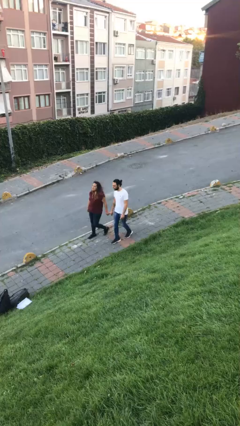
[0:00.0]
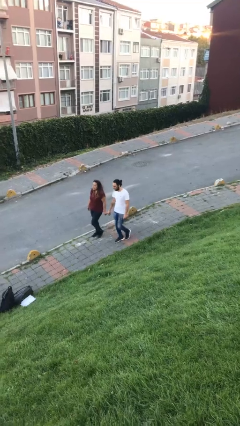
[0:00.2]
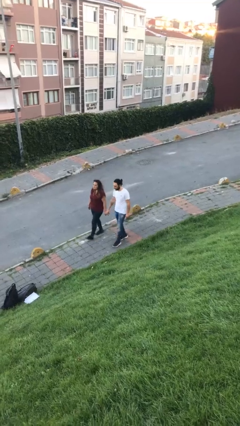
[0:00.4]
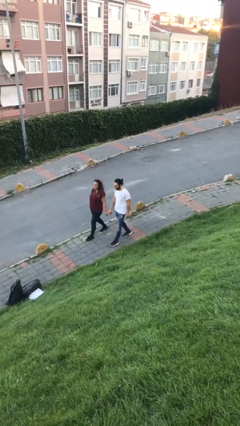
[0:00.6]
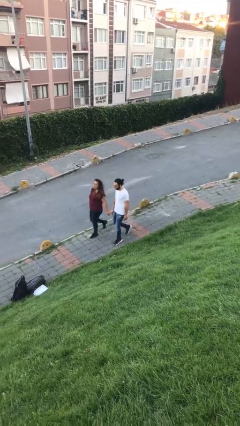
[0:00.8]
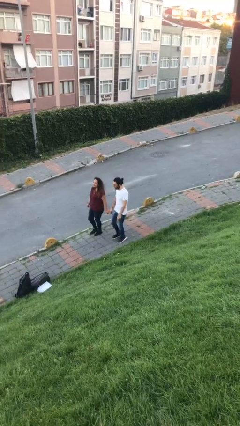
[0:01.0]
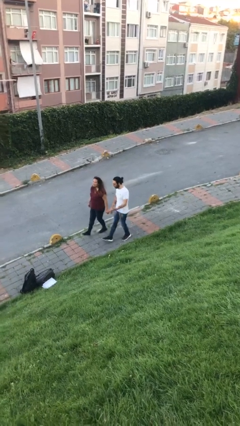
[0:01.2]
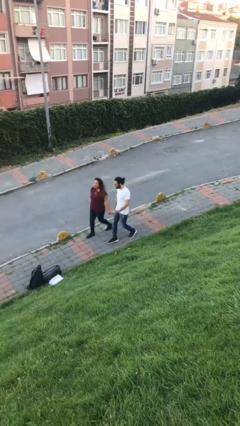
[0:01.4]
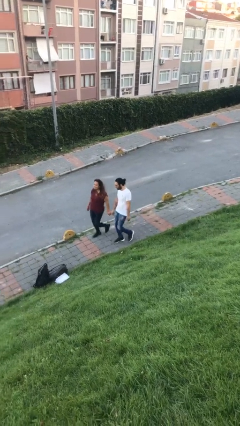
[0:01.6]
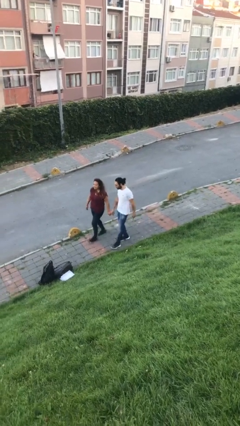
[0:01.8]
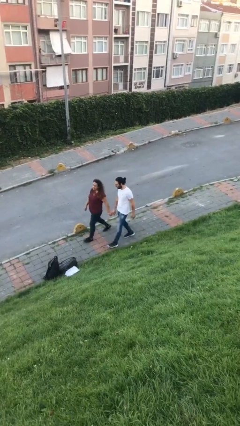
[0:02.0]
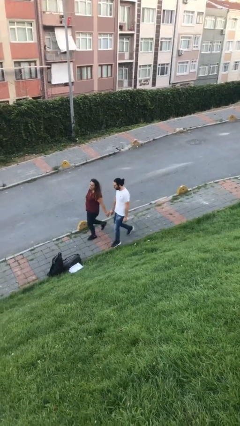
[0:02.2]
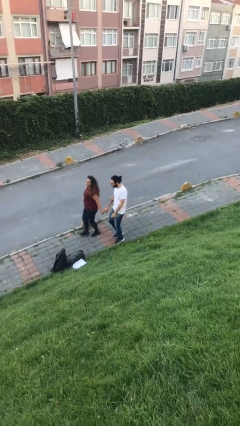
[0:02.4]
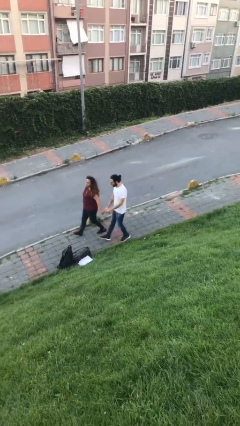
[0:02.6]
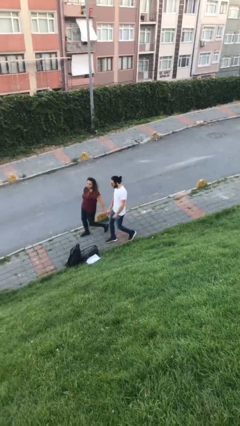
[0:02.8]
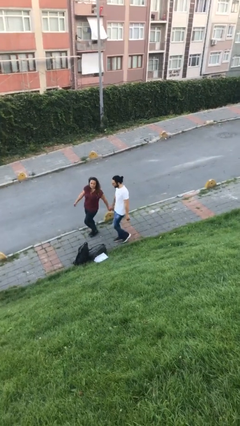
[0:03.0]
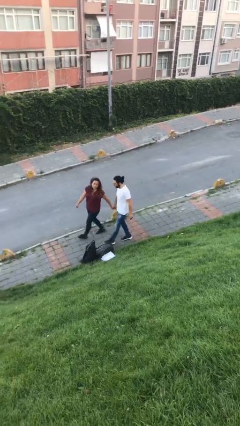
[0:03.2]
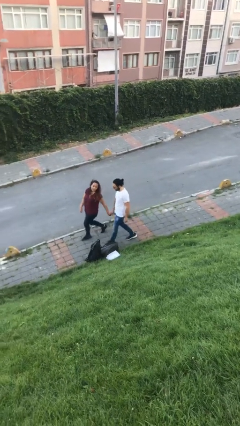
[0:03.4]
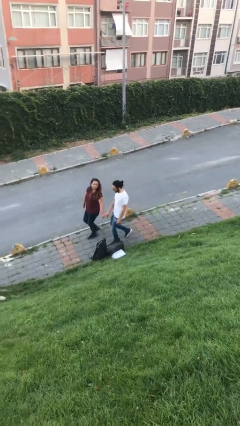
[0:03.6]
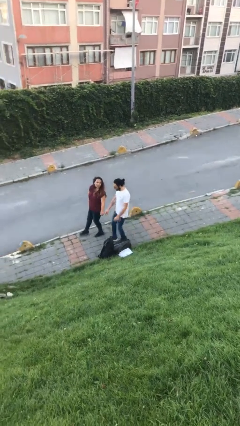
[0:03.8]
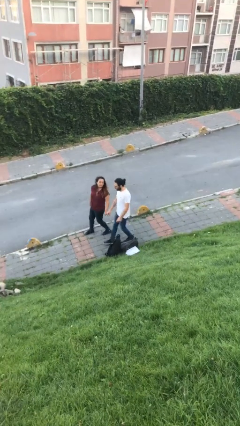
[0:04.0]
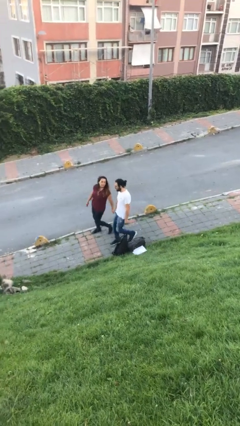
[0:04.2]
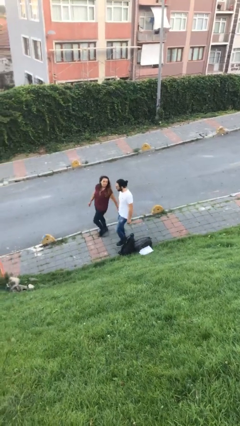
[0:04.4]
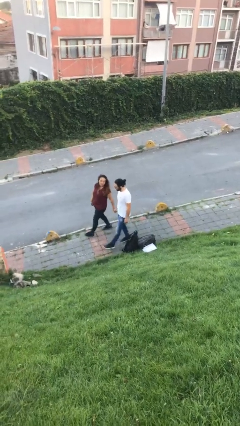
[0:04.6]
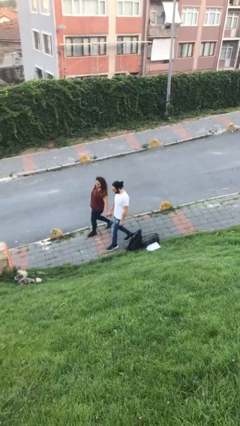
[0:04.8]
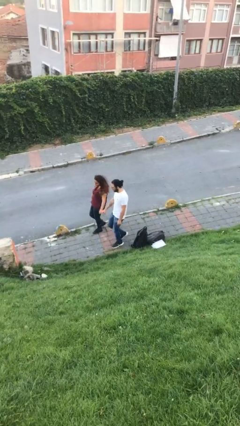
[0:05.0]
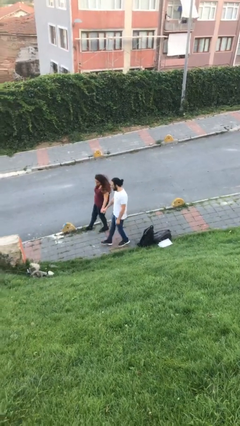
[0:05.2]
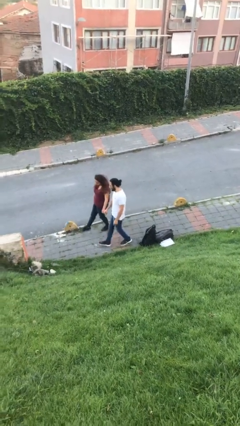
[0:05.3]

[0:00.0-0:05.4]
person holds hand

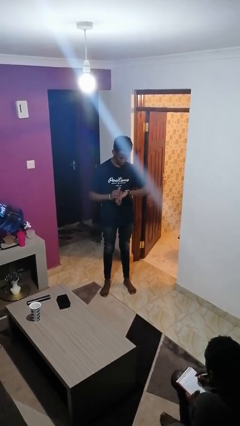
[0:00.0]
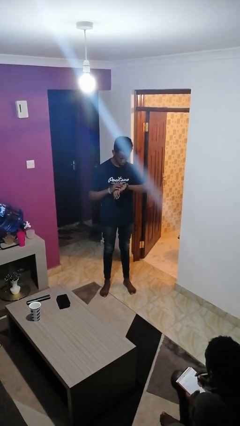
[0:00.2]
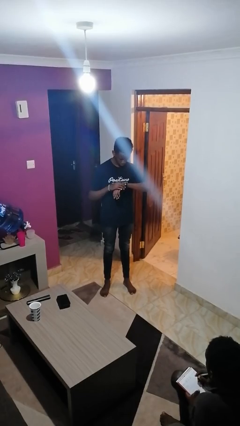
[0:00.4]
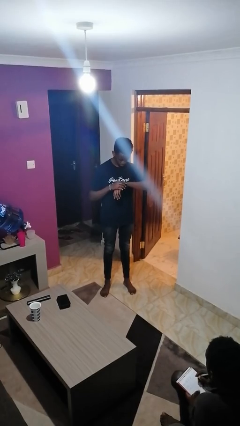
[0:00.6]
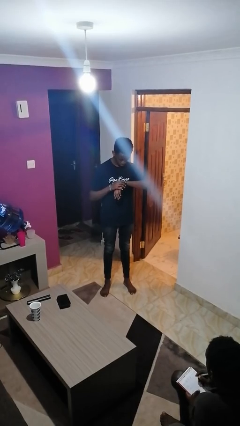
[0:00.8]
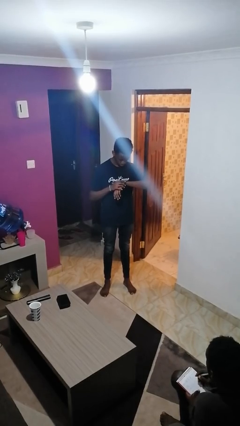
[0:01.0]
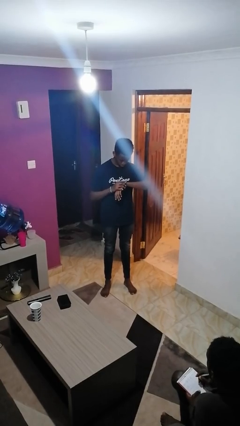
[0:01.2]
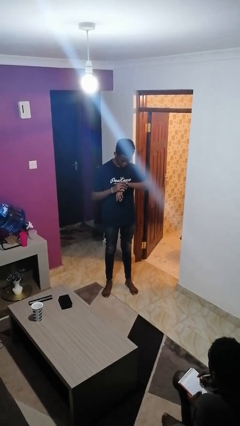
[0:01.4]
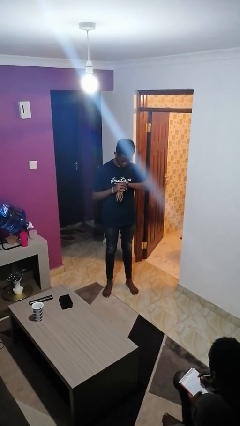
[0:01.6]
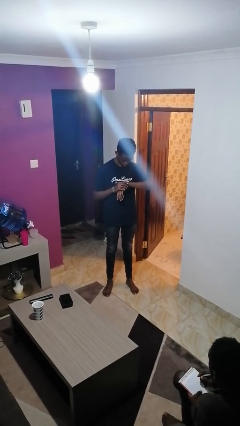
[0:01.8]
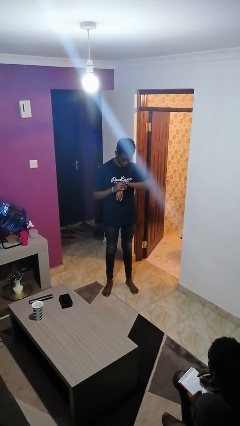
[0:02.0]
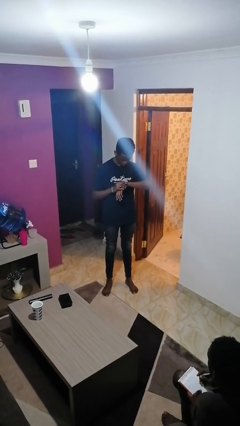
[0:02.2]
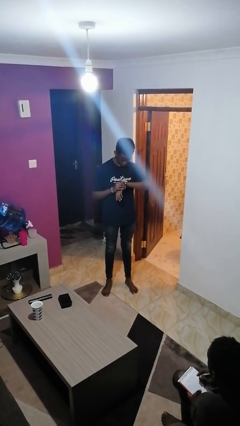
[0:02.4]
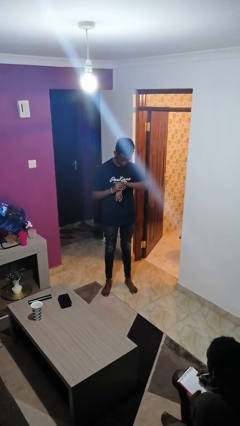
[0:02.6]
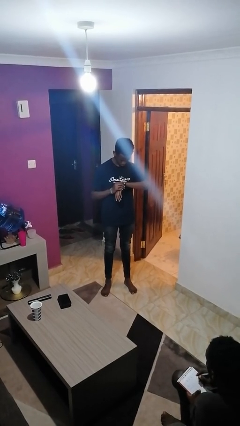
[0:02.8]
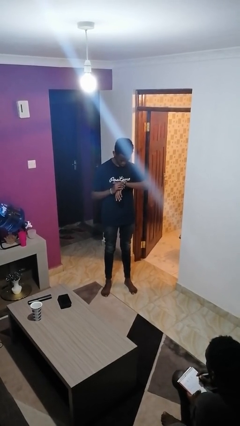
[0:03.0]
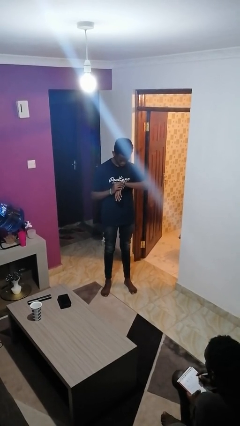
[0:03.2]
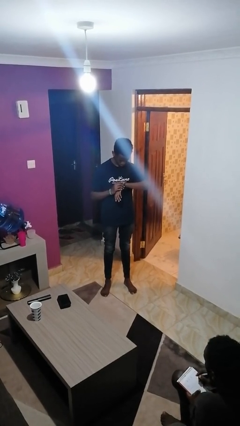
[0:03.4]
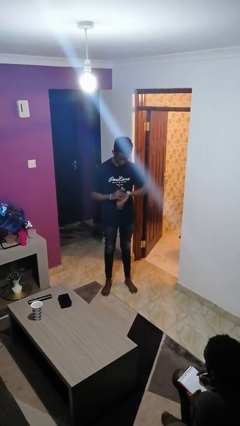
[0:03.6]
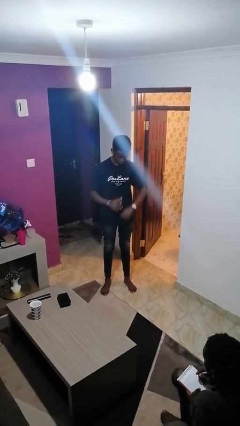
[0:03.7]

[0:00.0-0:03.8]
person looks at wristwatch

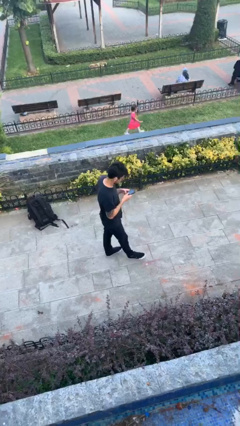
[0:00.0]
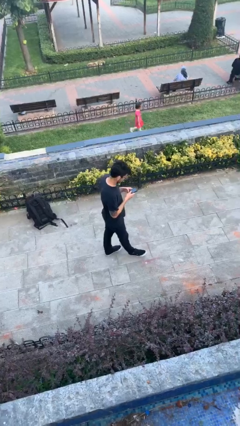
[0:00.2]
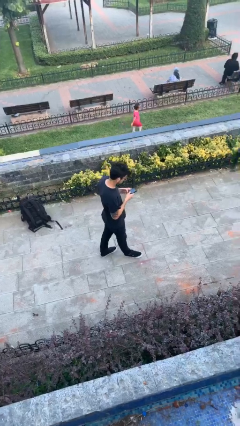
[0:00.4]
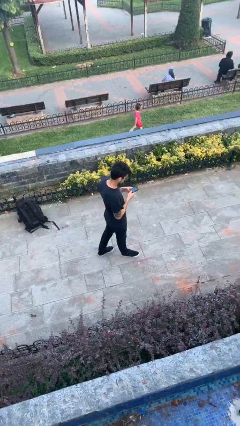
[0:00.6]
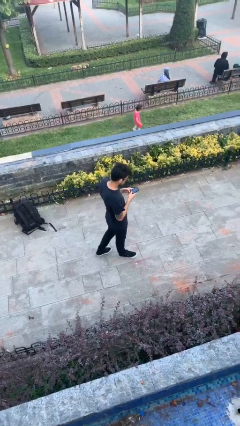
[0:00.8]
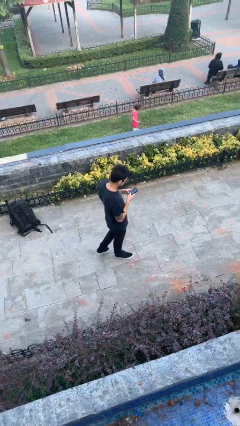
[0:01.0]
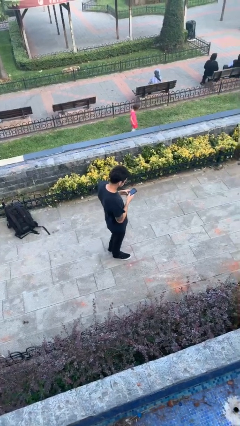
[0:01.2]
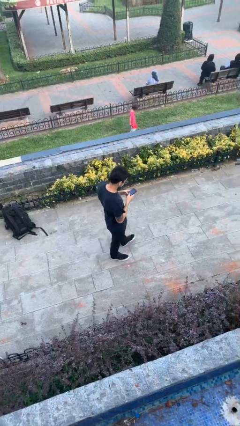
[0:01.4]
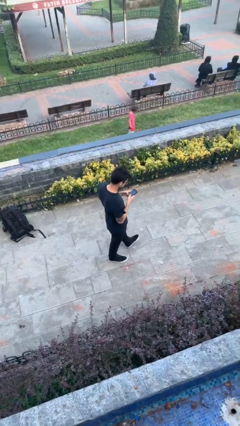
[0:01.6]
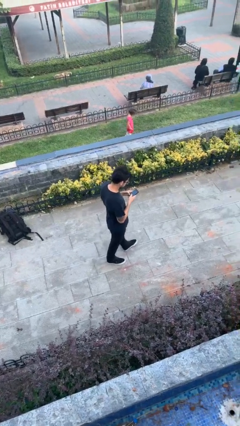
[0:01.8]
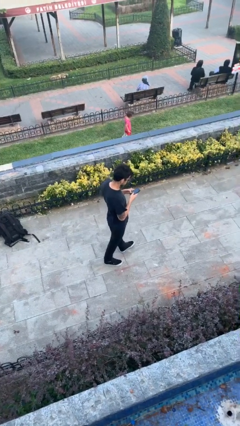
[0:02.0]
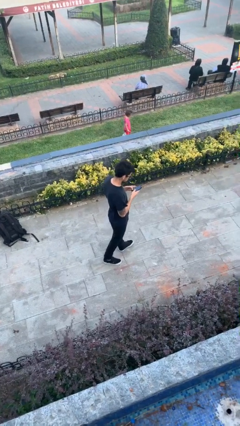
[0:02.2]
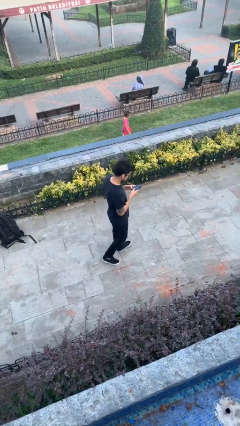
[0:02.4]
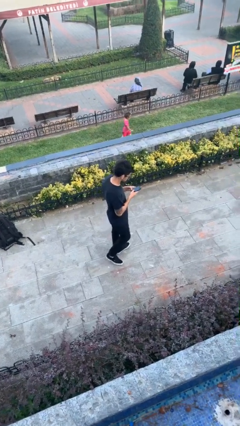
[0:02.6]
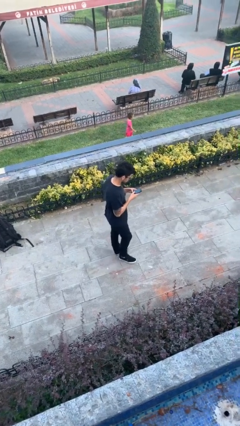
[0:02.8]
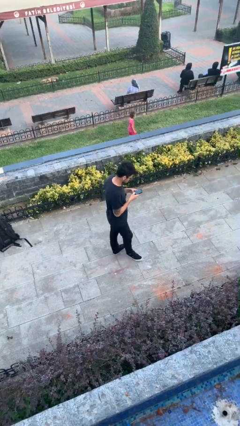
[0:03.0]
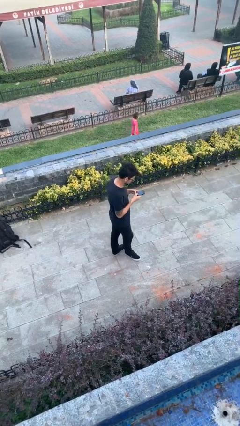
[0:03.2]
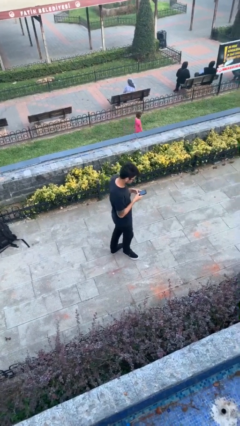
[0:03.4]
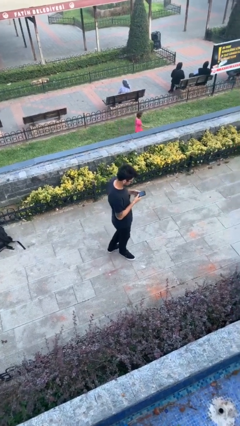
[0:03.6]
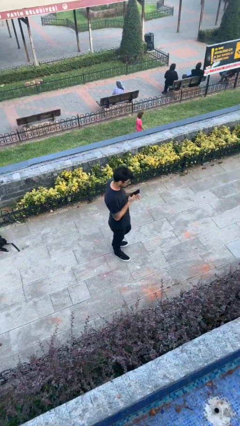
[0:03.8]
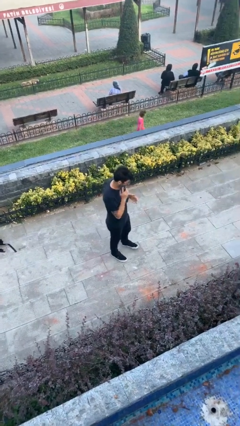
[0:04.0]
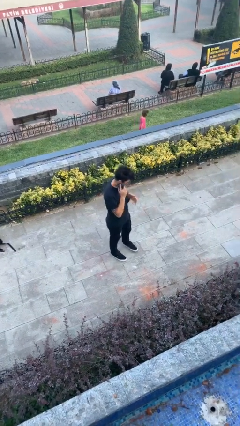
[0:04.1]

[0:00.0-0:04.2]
person texts on phone

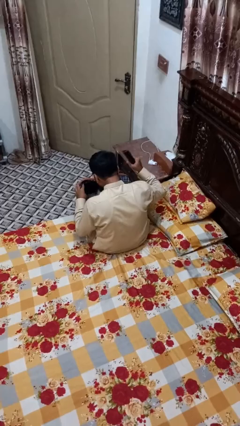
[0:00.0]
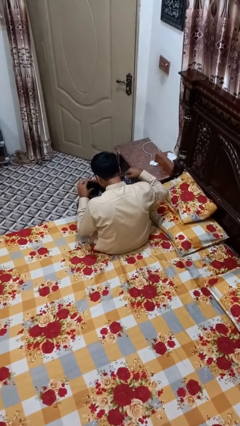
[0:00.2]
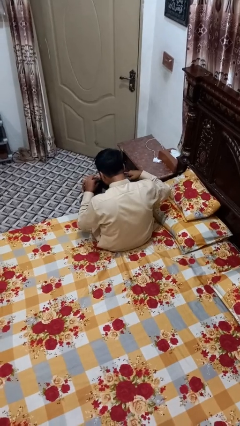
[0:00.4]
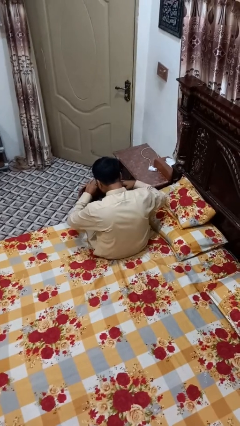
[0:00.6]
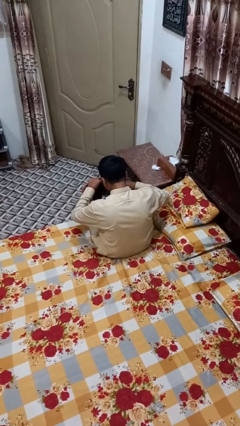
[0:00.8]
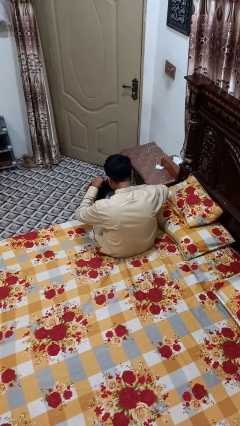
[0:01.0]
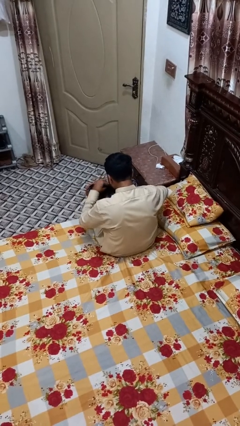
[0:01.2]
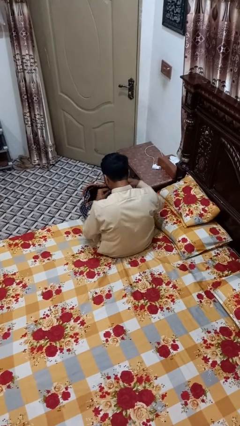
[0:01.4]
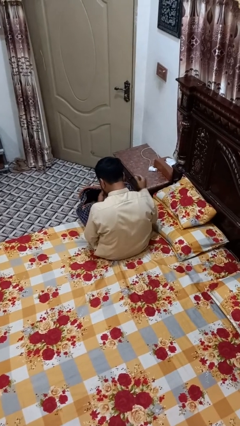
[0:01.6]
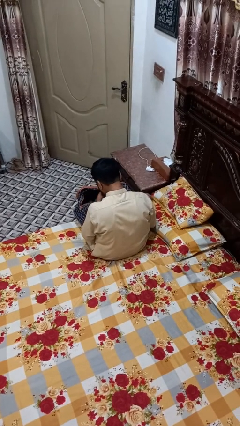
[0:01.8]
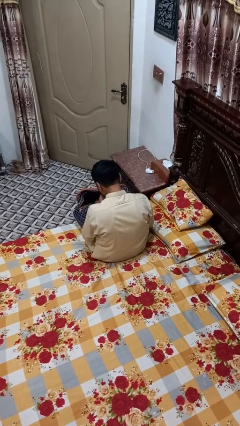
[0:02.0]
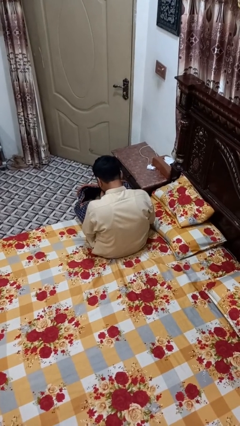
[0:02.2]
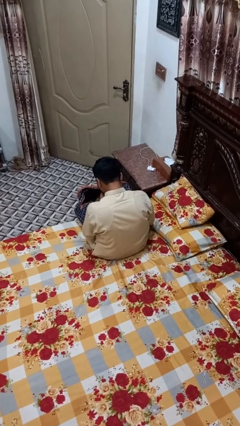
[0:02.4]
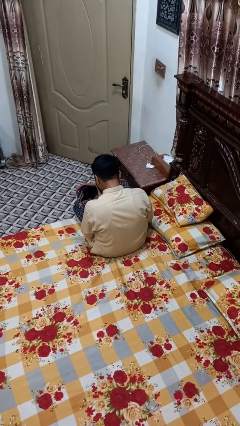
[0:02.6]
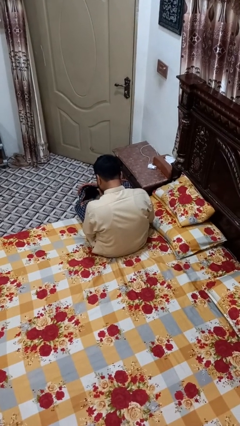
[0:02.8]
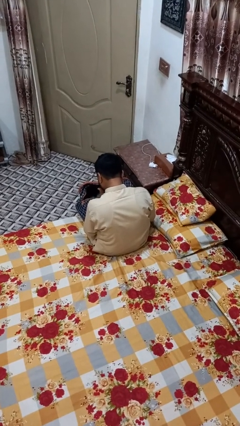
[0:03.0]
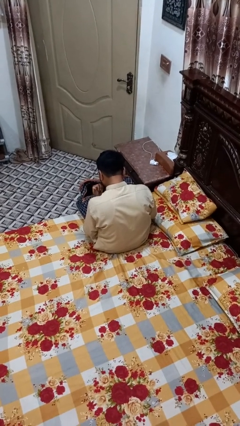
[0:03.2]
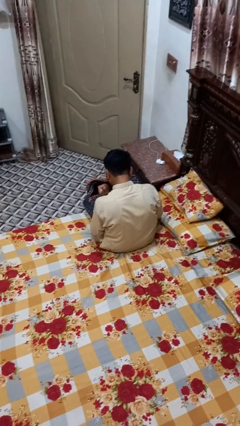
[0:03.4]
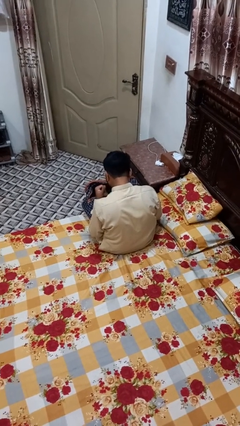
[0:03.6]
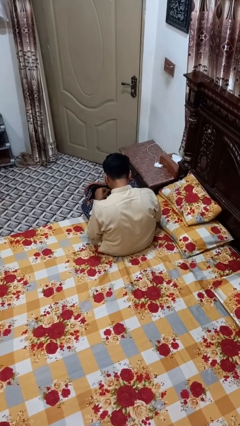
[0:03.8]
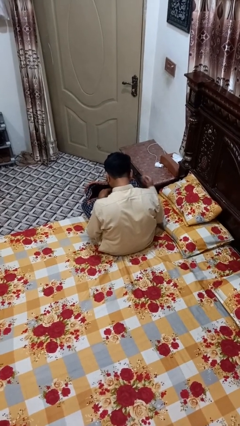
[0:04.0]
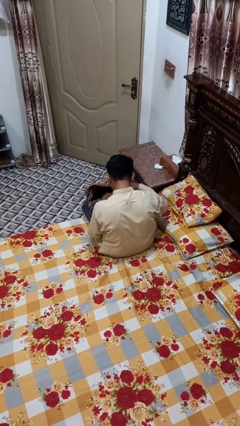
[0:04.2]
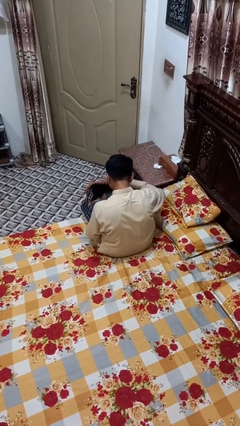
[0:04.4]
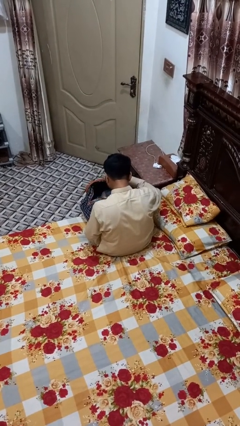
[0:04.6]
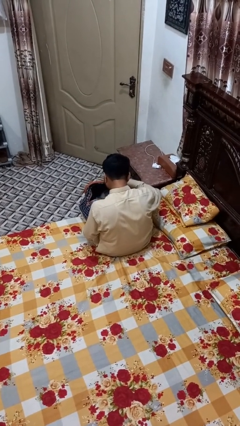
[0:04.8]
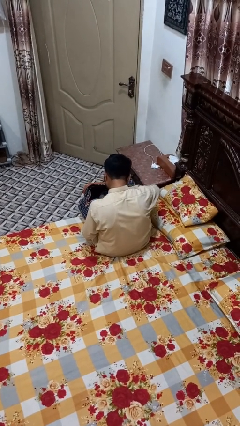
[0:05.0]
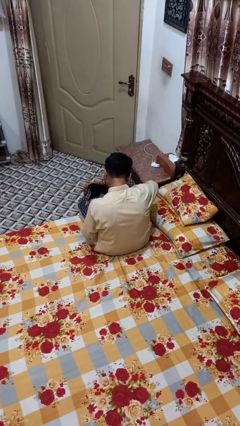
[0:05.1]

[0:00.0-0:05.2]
person puts object into bag
